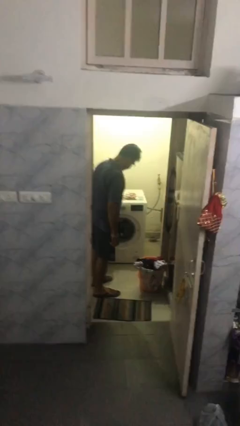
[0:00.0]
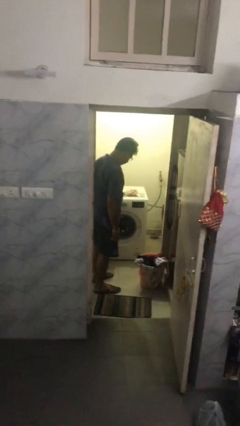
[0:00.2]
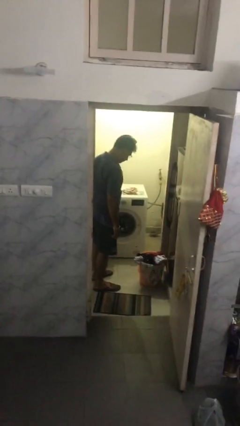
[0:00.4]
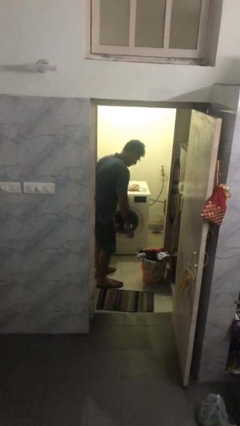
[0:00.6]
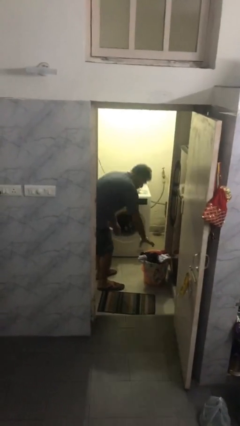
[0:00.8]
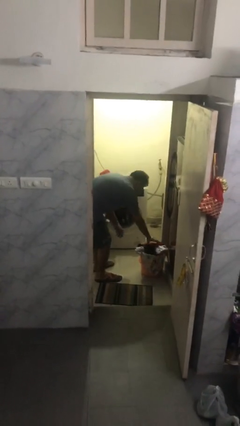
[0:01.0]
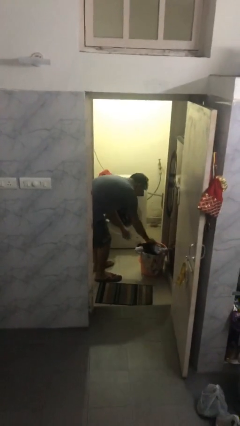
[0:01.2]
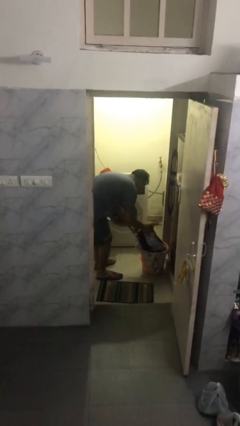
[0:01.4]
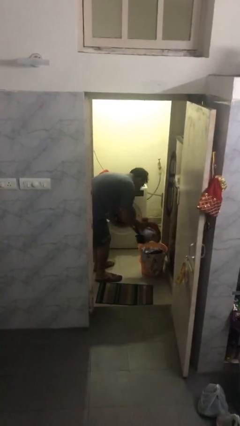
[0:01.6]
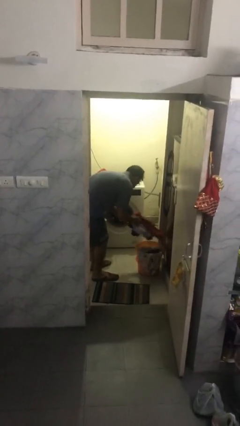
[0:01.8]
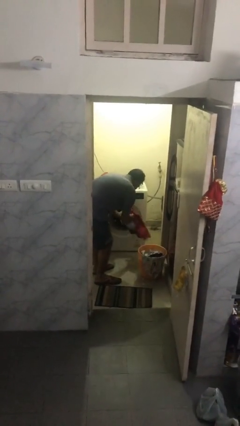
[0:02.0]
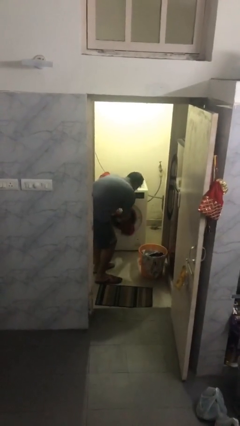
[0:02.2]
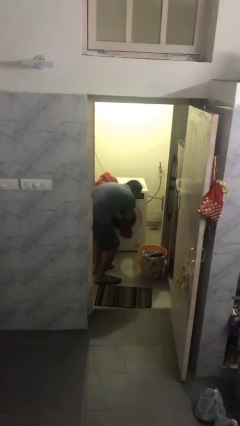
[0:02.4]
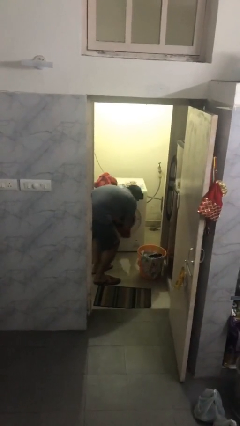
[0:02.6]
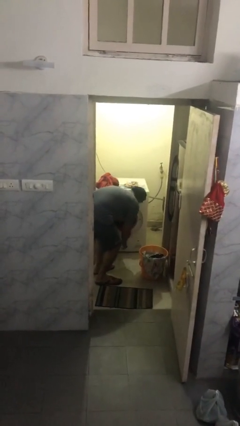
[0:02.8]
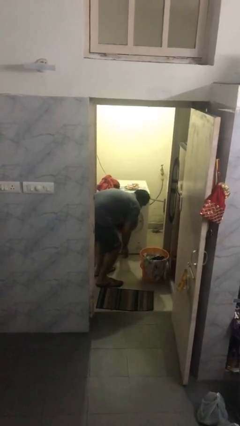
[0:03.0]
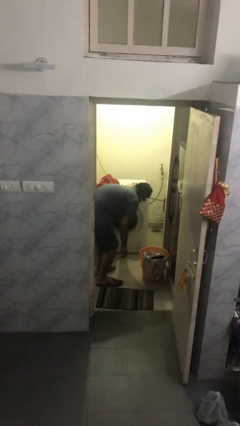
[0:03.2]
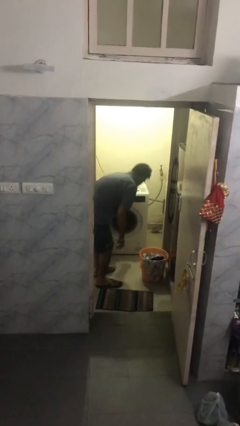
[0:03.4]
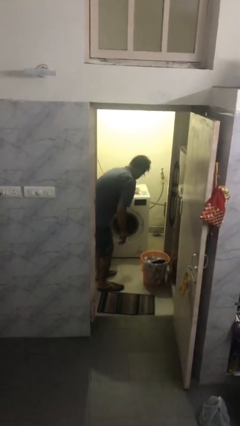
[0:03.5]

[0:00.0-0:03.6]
person loads clotheswasher

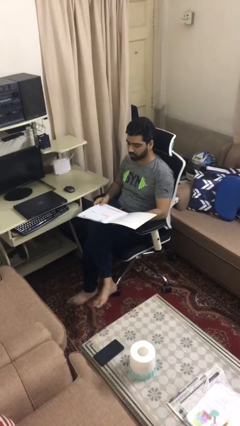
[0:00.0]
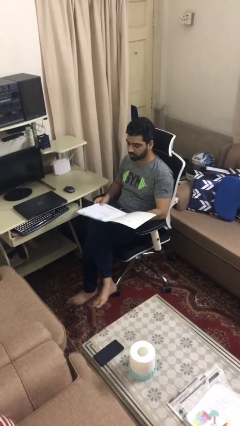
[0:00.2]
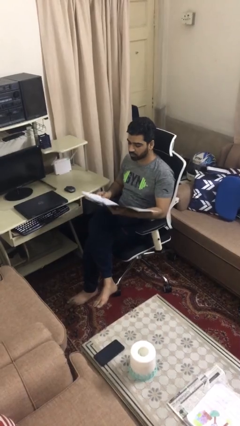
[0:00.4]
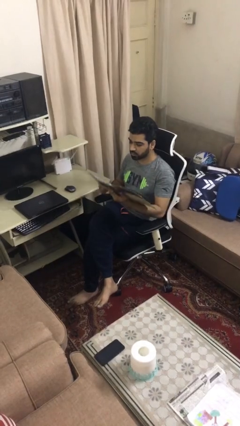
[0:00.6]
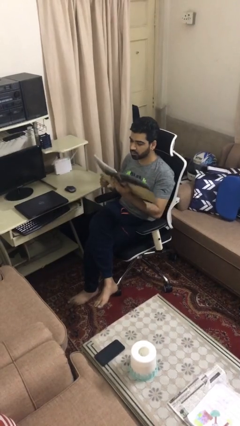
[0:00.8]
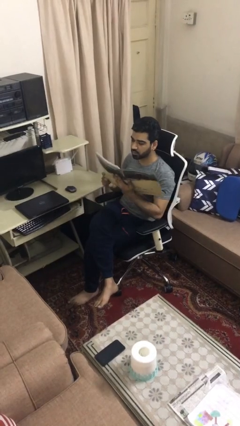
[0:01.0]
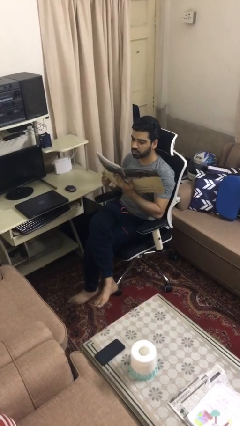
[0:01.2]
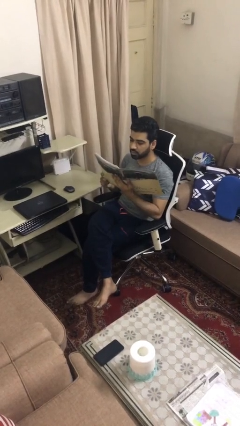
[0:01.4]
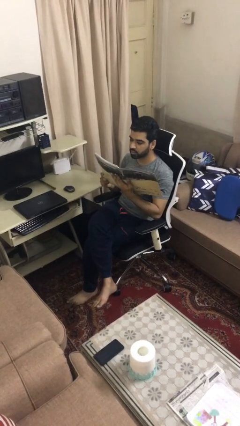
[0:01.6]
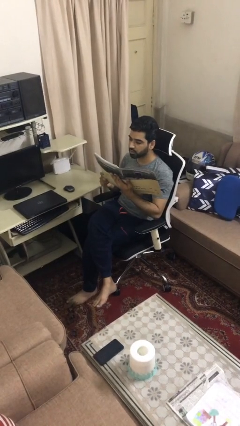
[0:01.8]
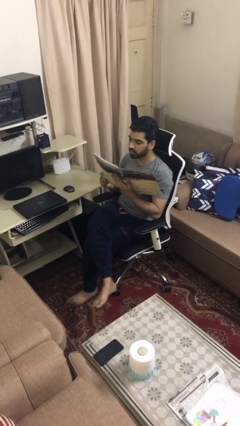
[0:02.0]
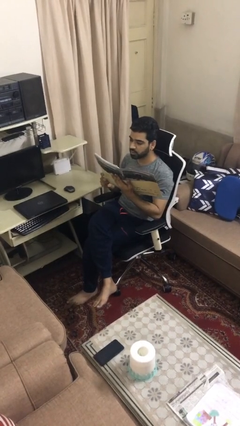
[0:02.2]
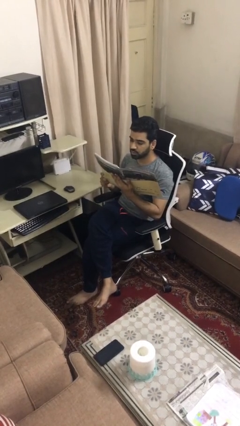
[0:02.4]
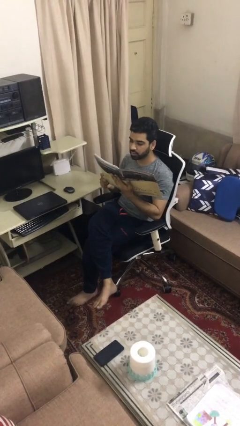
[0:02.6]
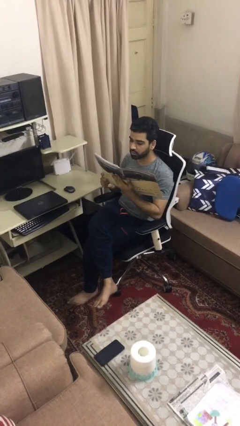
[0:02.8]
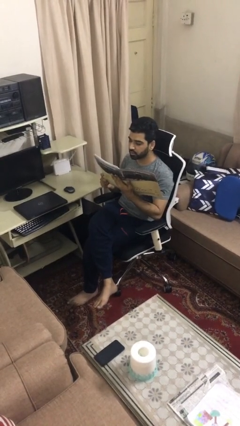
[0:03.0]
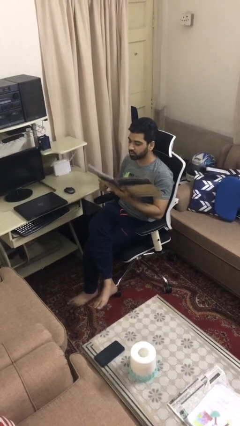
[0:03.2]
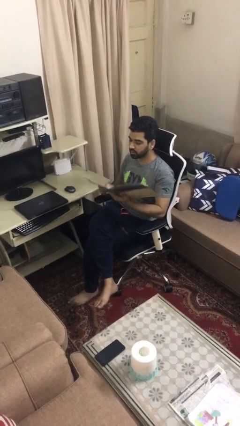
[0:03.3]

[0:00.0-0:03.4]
person reads document

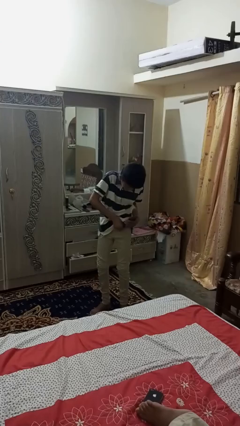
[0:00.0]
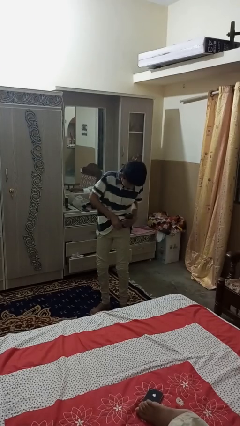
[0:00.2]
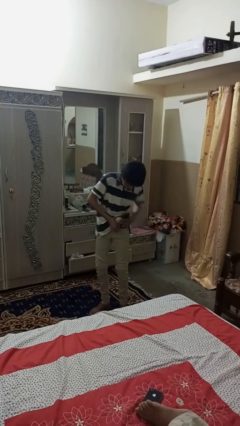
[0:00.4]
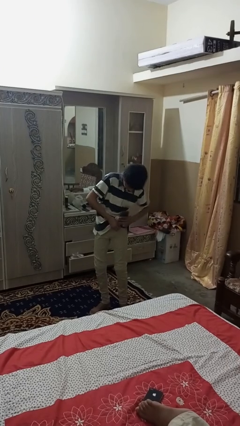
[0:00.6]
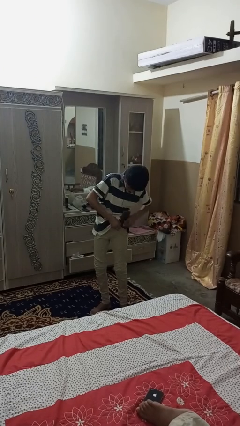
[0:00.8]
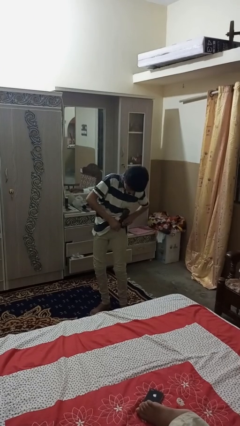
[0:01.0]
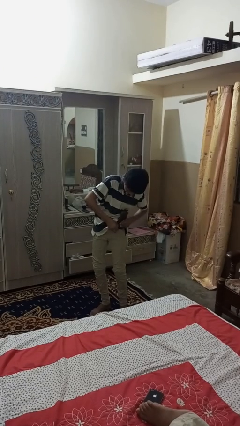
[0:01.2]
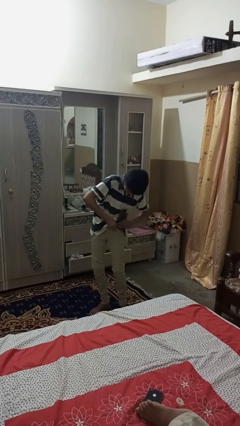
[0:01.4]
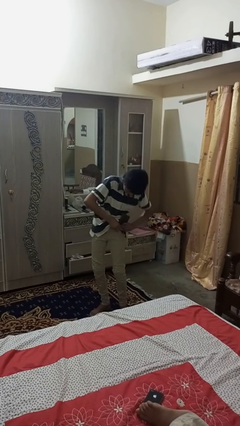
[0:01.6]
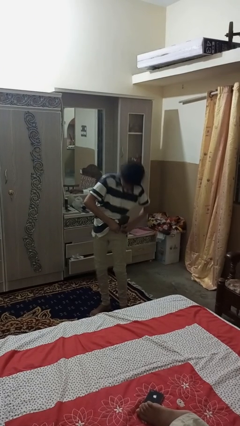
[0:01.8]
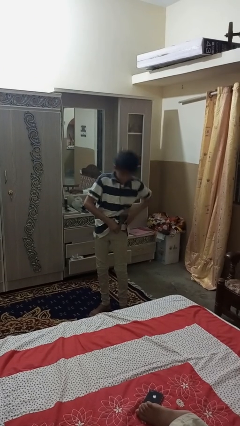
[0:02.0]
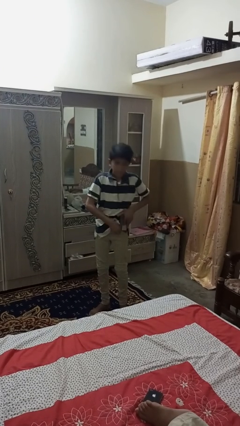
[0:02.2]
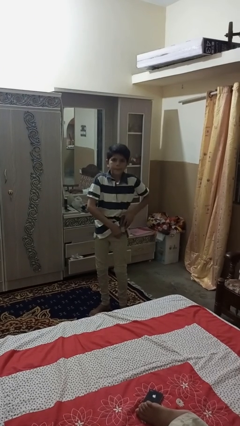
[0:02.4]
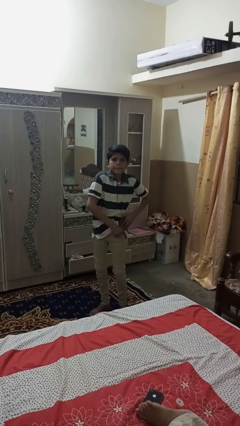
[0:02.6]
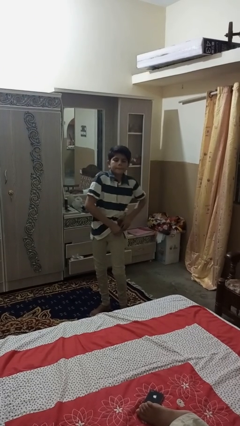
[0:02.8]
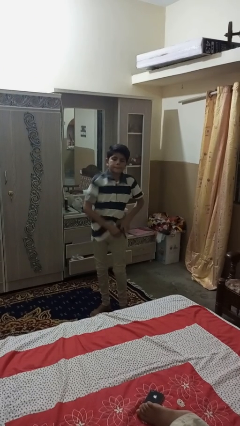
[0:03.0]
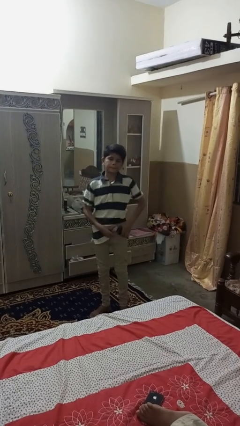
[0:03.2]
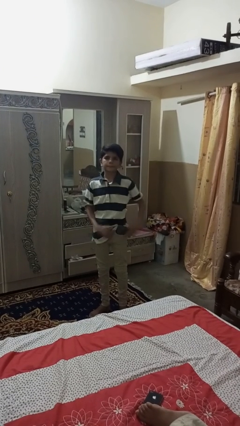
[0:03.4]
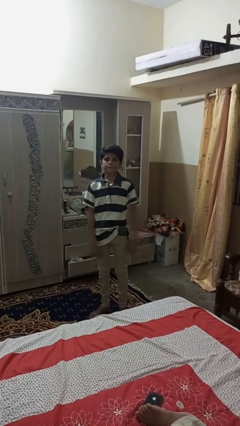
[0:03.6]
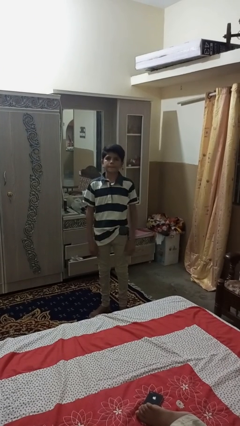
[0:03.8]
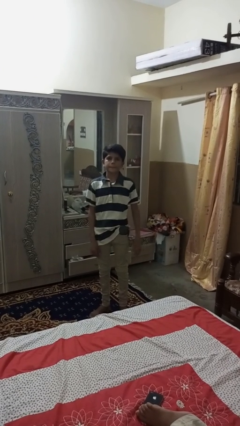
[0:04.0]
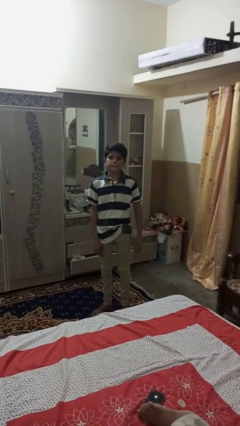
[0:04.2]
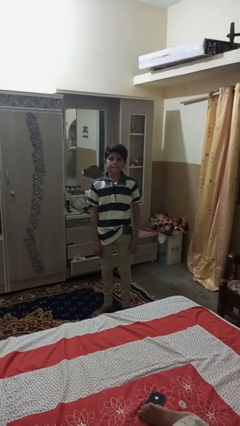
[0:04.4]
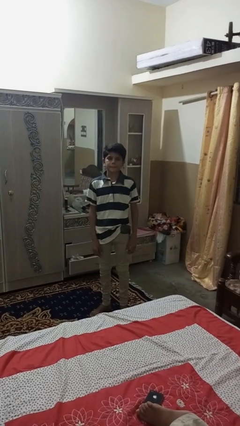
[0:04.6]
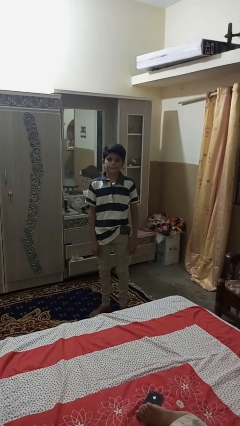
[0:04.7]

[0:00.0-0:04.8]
person takes phone from pocket

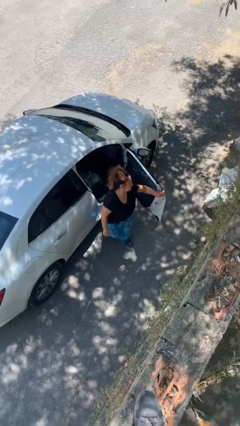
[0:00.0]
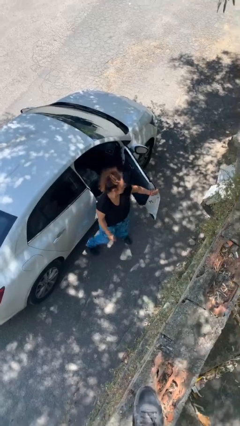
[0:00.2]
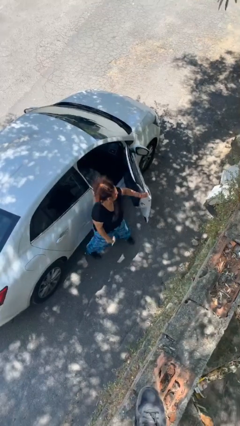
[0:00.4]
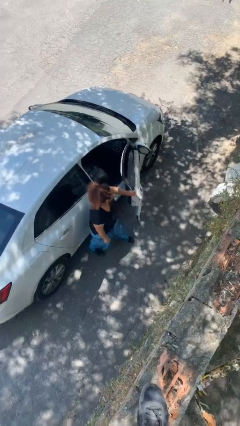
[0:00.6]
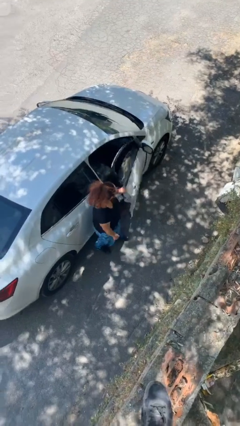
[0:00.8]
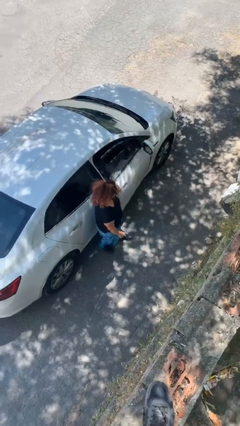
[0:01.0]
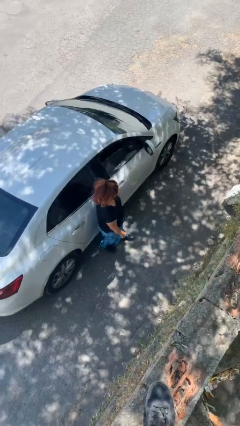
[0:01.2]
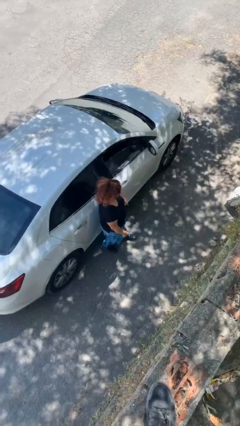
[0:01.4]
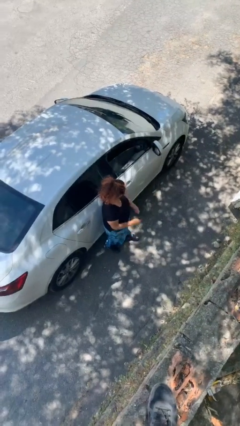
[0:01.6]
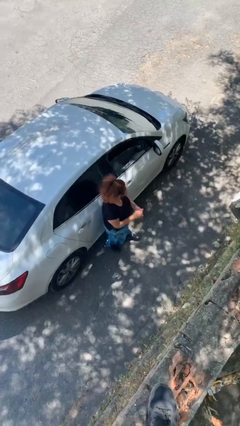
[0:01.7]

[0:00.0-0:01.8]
person closes car door

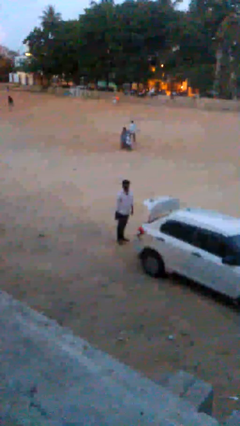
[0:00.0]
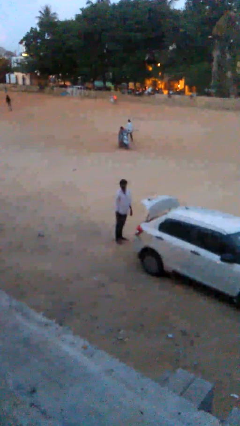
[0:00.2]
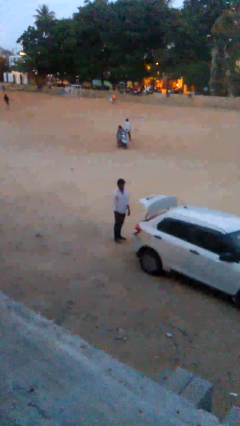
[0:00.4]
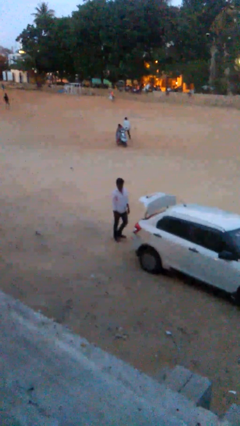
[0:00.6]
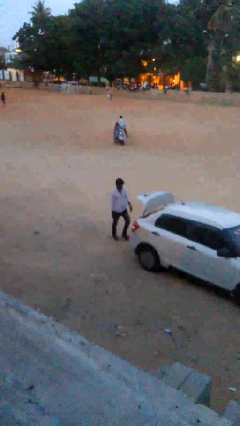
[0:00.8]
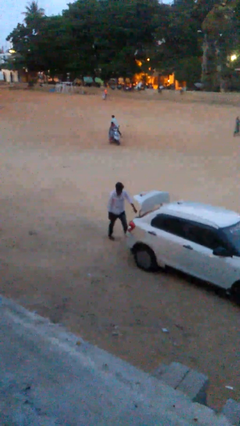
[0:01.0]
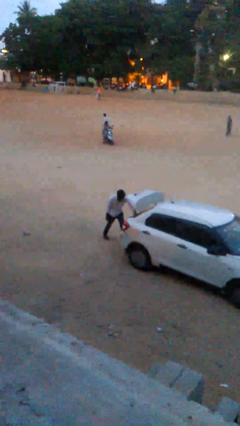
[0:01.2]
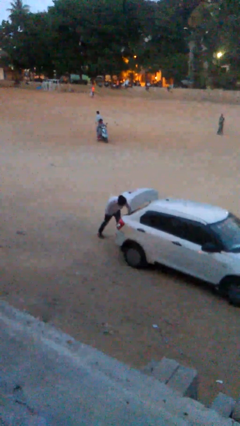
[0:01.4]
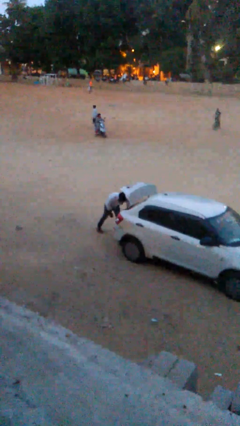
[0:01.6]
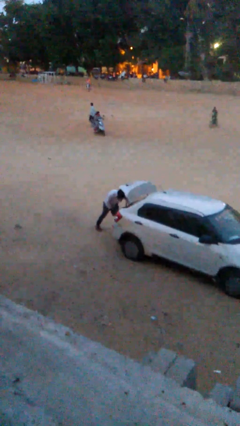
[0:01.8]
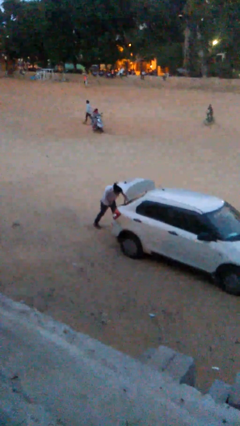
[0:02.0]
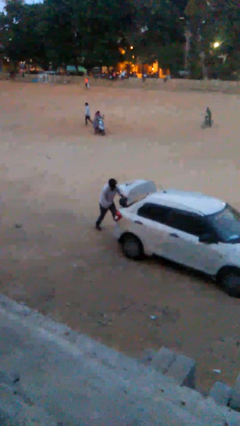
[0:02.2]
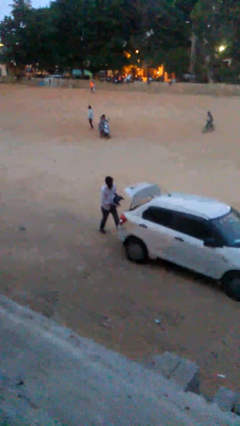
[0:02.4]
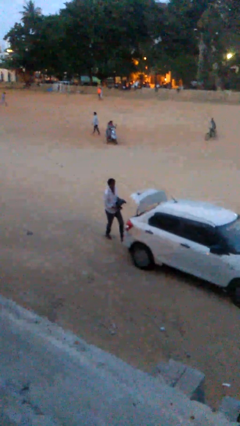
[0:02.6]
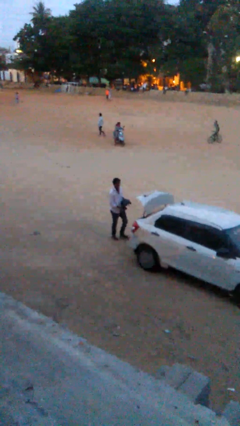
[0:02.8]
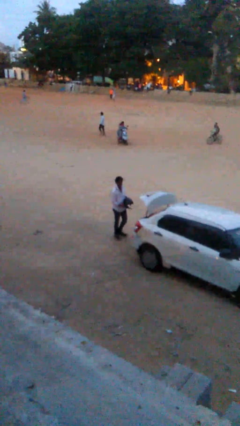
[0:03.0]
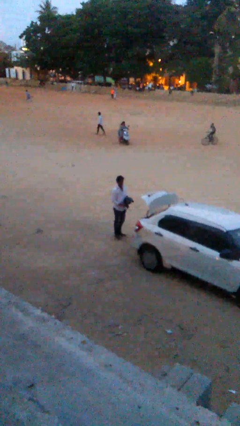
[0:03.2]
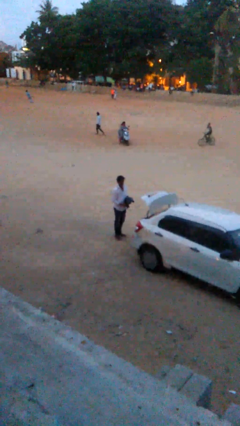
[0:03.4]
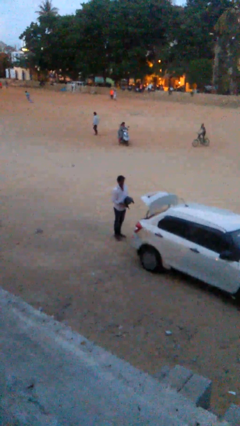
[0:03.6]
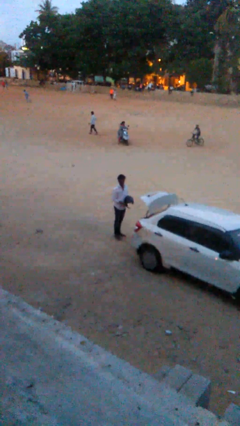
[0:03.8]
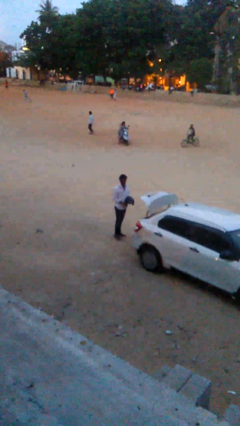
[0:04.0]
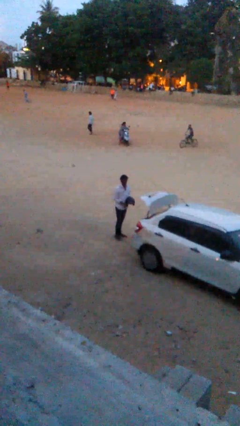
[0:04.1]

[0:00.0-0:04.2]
person unloads car
